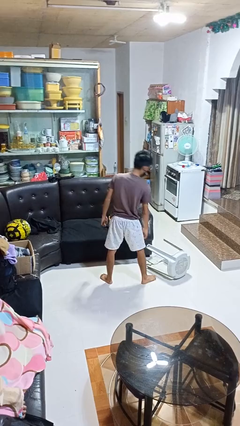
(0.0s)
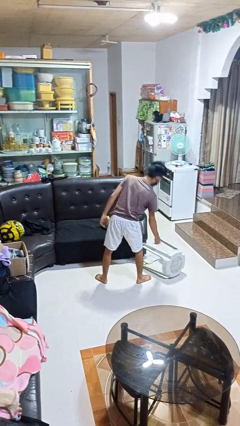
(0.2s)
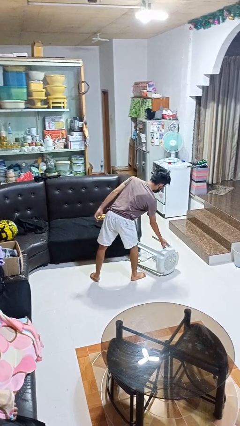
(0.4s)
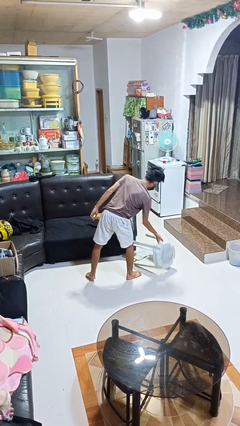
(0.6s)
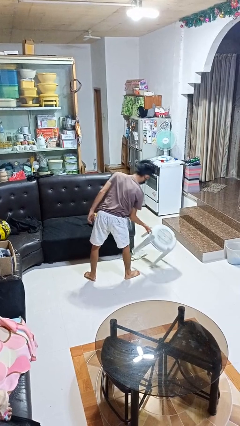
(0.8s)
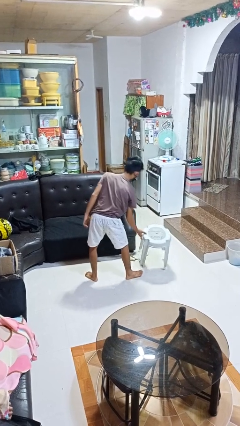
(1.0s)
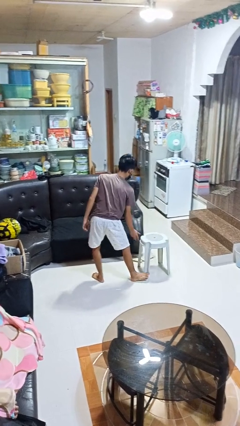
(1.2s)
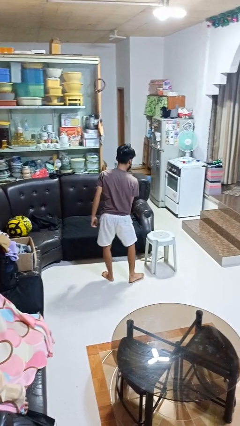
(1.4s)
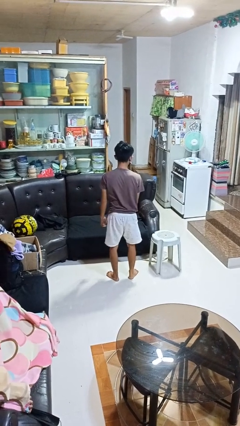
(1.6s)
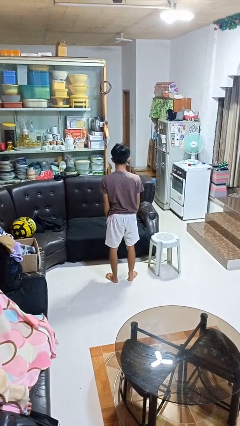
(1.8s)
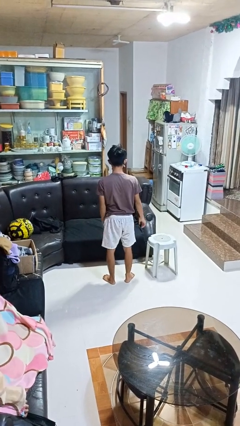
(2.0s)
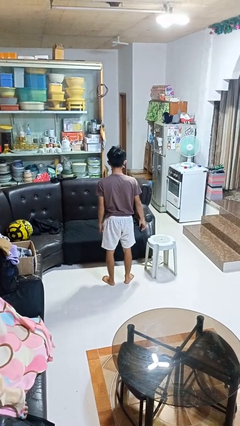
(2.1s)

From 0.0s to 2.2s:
person sets upright furniture

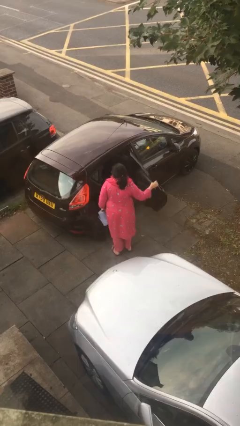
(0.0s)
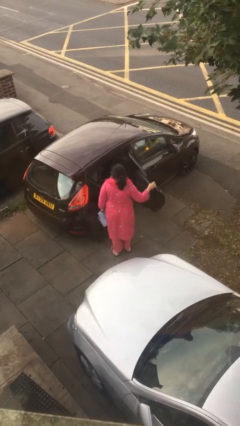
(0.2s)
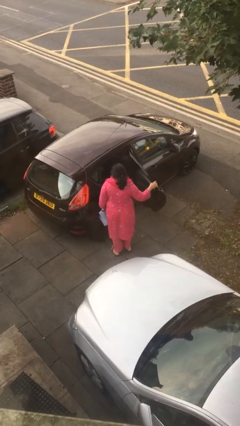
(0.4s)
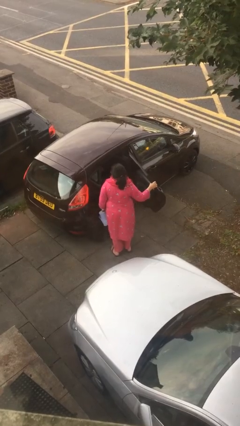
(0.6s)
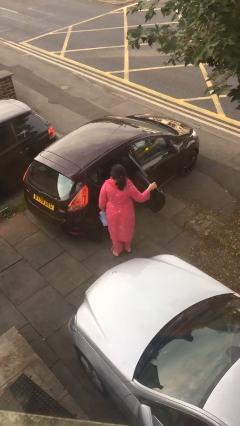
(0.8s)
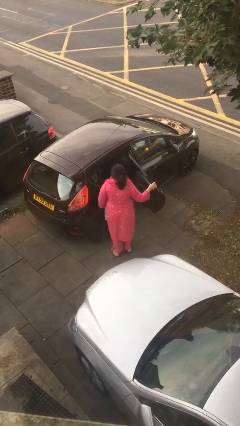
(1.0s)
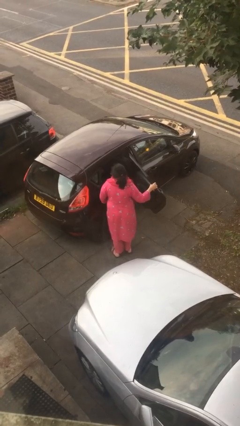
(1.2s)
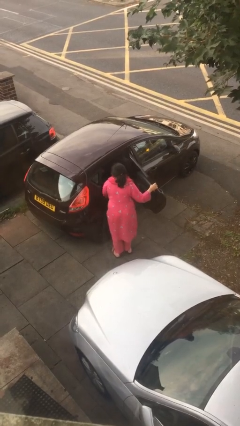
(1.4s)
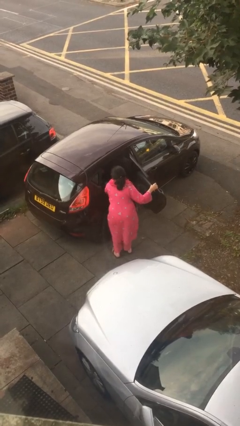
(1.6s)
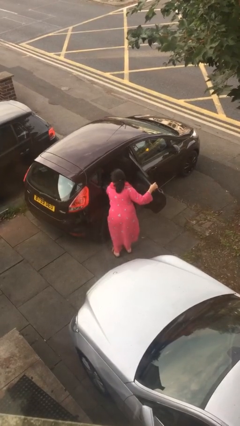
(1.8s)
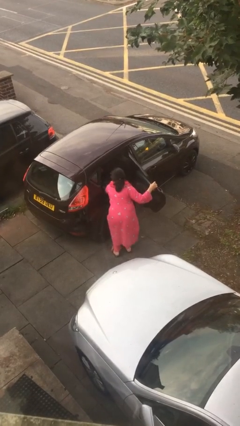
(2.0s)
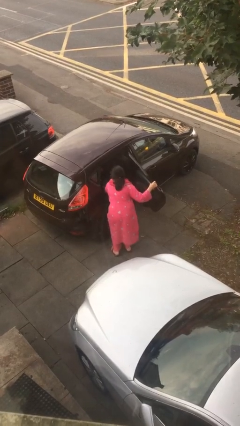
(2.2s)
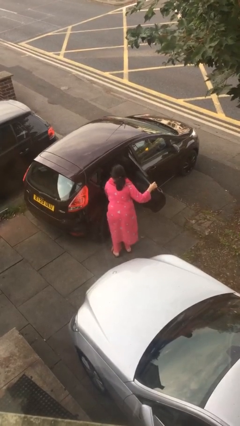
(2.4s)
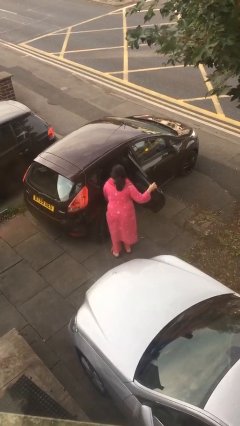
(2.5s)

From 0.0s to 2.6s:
person loads car

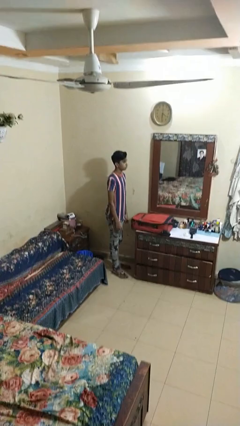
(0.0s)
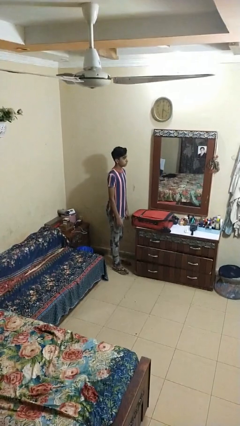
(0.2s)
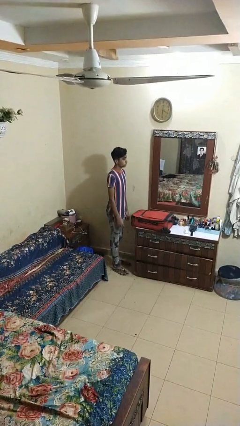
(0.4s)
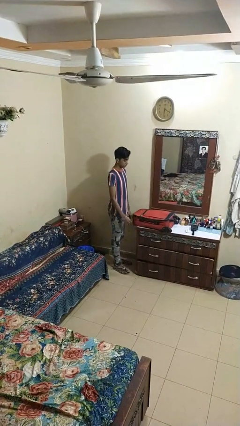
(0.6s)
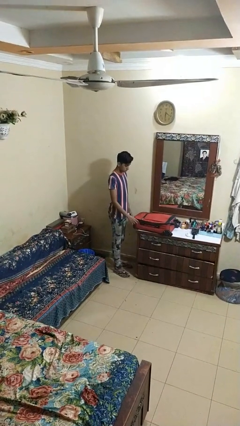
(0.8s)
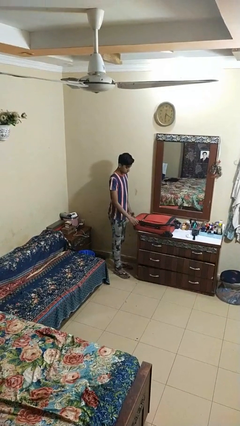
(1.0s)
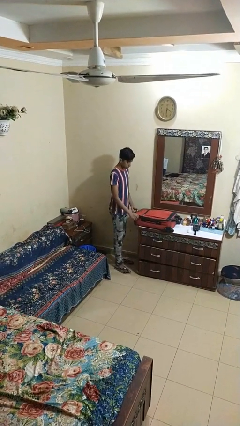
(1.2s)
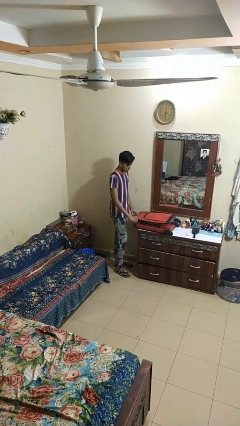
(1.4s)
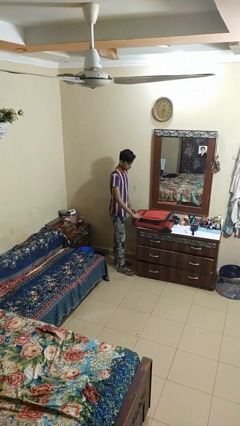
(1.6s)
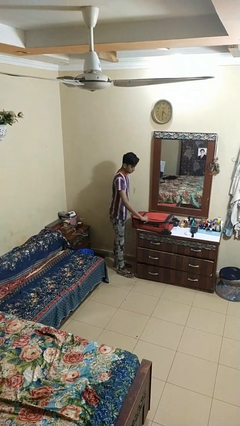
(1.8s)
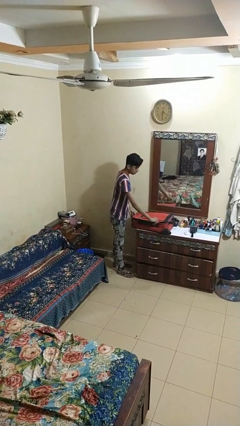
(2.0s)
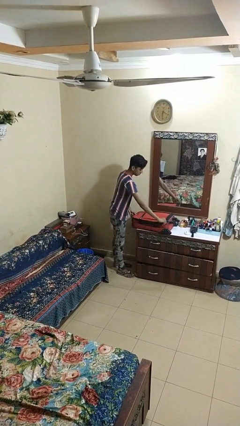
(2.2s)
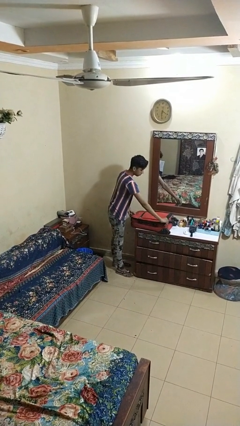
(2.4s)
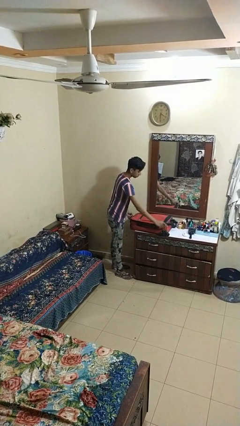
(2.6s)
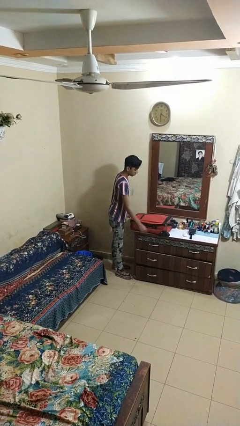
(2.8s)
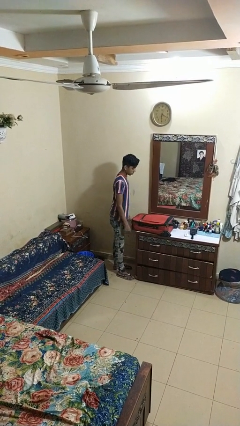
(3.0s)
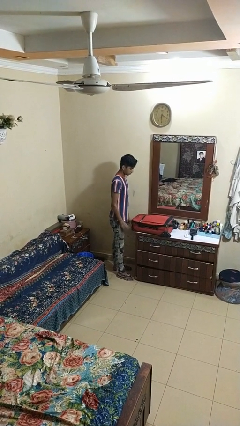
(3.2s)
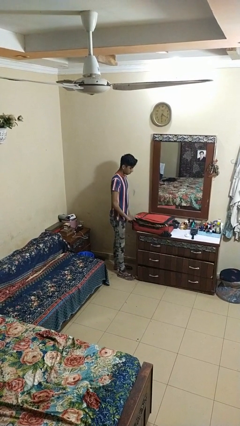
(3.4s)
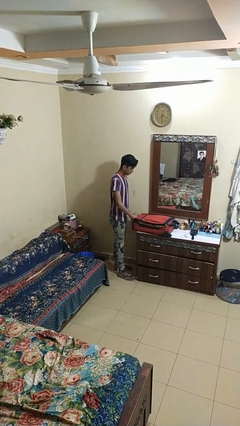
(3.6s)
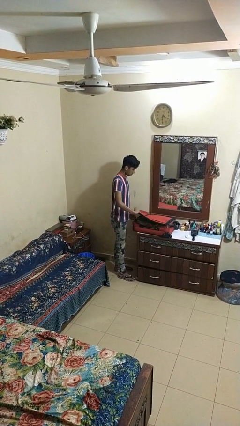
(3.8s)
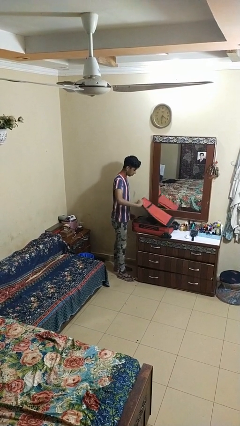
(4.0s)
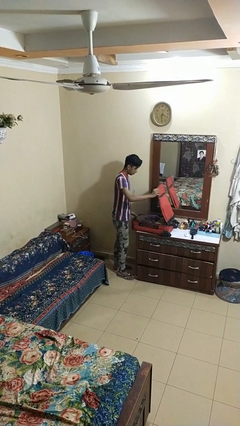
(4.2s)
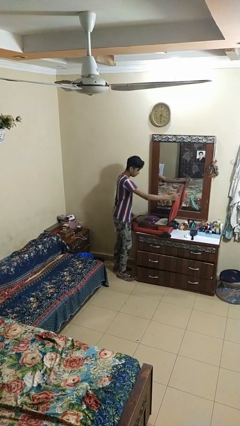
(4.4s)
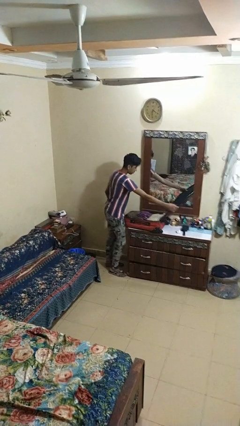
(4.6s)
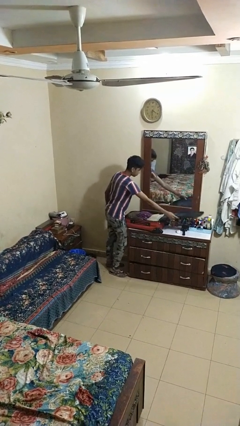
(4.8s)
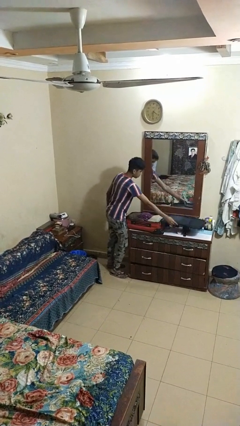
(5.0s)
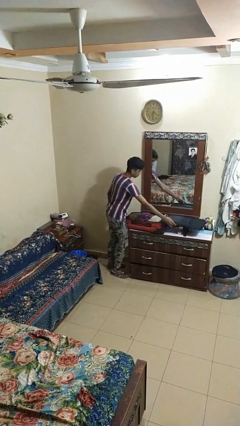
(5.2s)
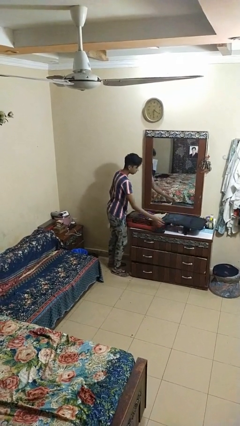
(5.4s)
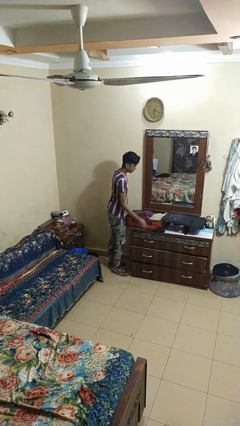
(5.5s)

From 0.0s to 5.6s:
person opens suitcase

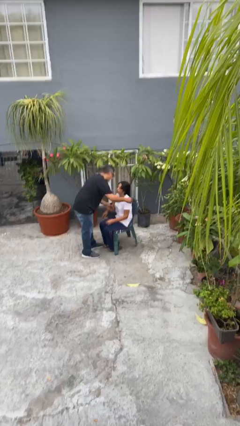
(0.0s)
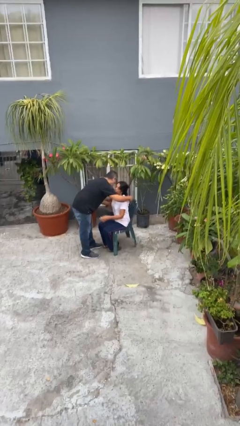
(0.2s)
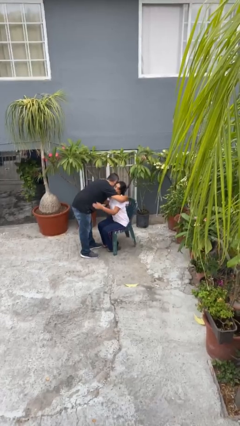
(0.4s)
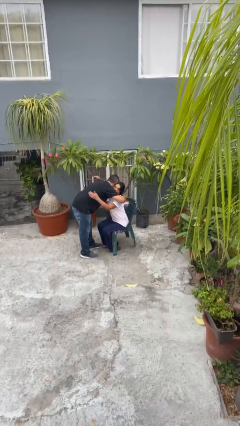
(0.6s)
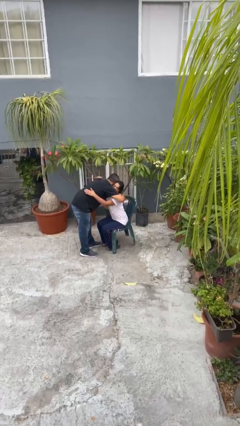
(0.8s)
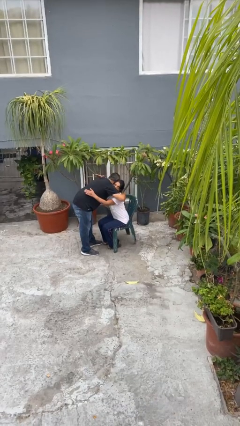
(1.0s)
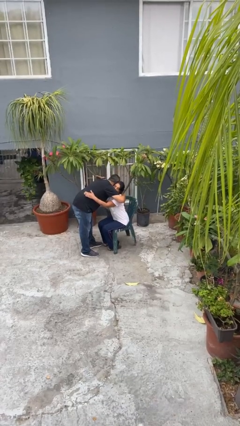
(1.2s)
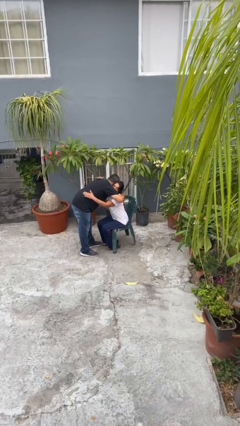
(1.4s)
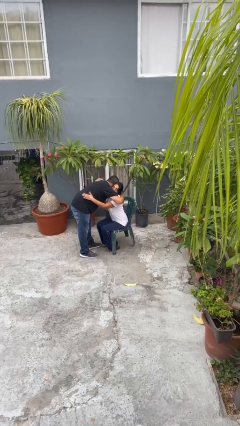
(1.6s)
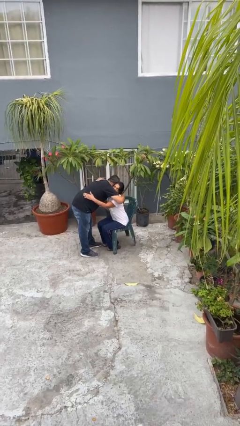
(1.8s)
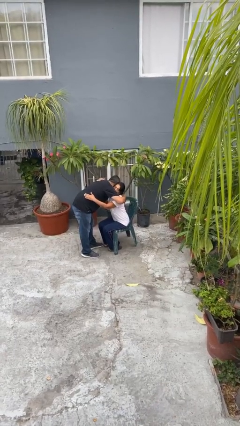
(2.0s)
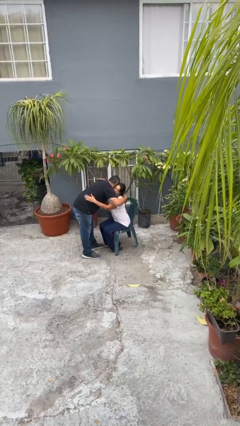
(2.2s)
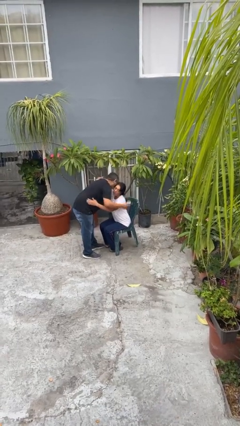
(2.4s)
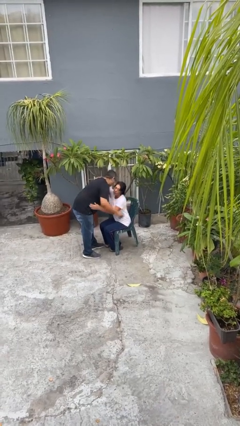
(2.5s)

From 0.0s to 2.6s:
person embraces person

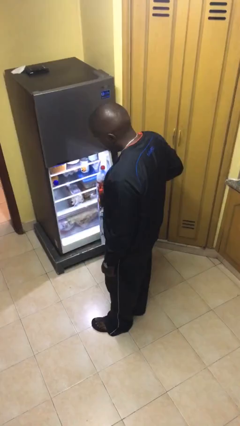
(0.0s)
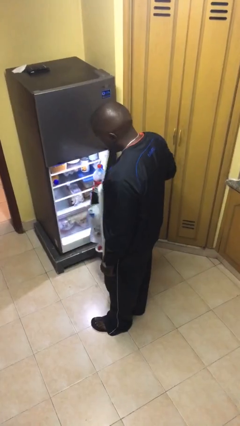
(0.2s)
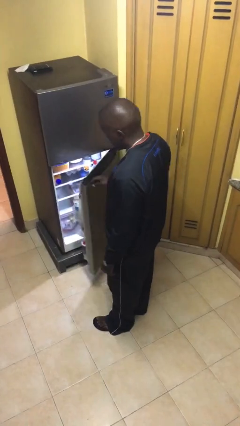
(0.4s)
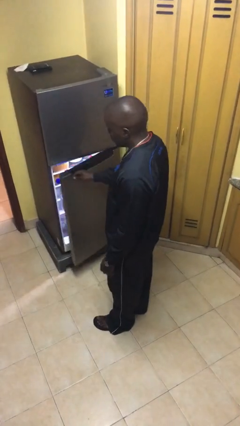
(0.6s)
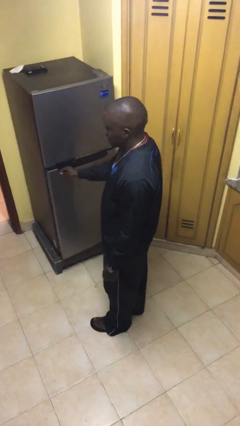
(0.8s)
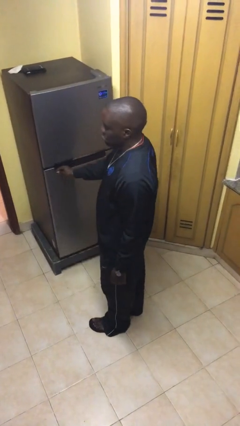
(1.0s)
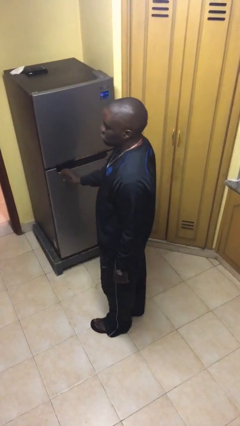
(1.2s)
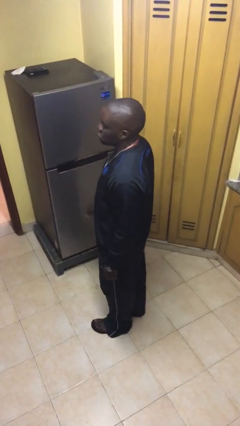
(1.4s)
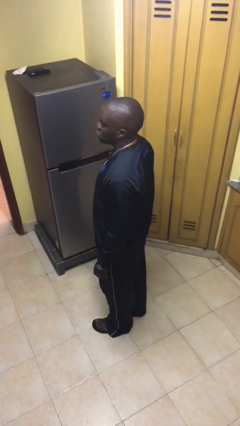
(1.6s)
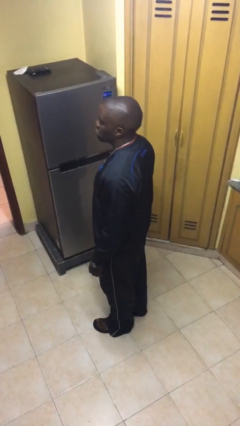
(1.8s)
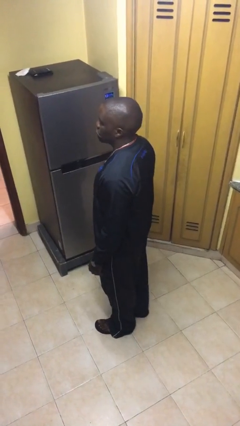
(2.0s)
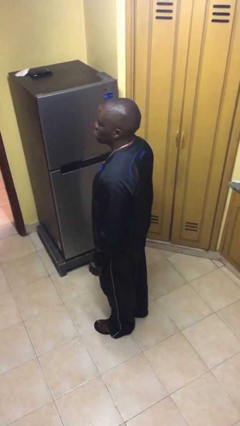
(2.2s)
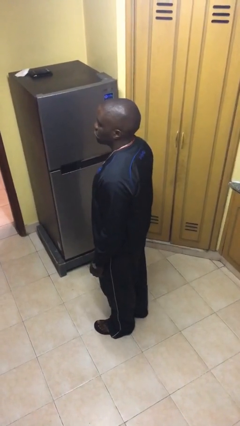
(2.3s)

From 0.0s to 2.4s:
person closes refrigerator

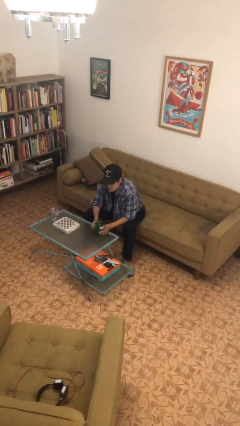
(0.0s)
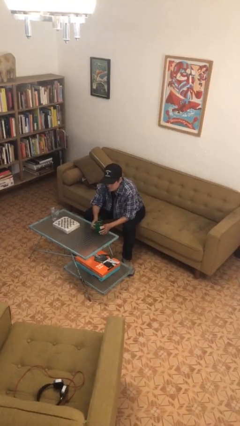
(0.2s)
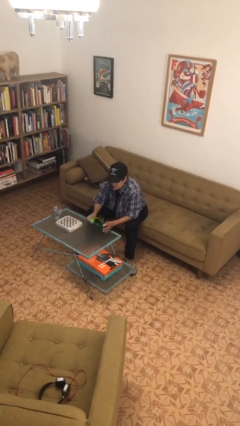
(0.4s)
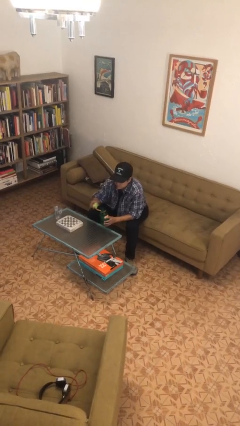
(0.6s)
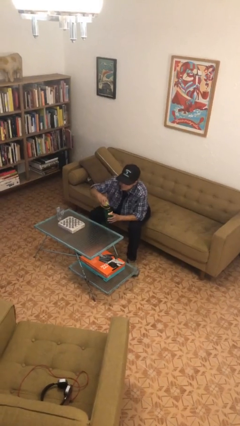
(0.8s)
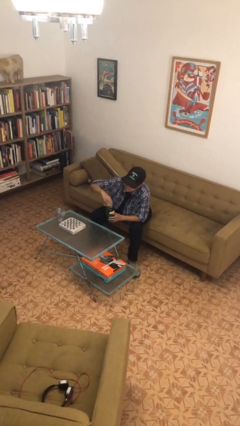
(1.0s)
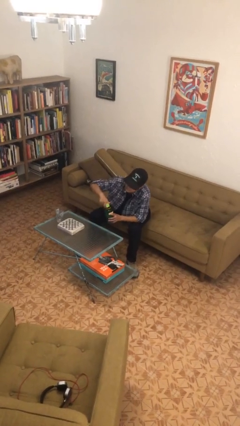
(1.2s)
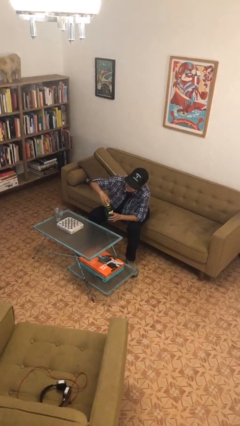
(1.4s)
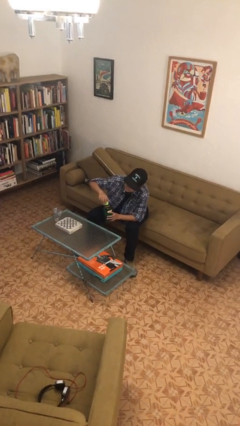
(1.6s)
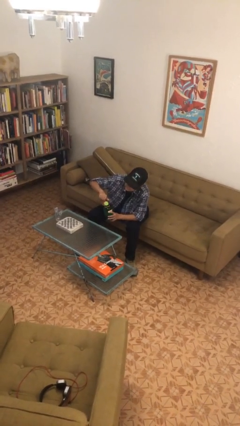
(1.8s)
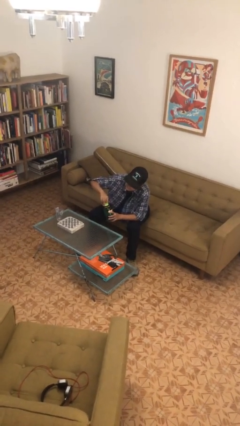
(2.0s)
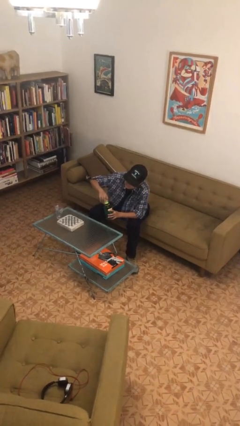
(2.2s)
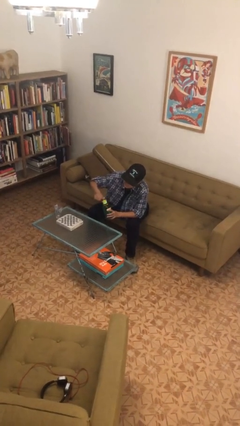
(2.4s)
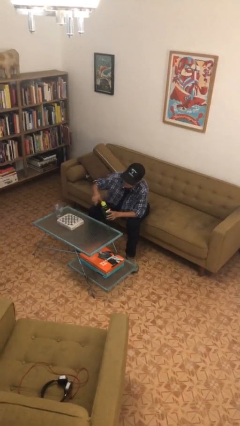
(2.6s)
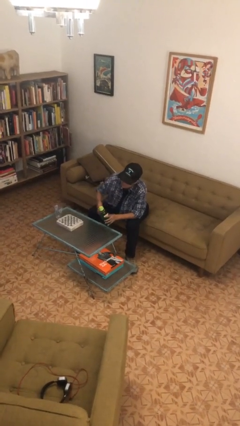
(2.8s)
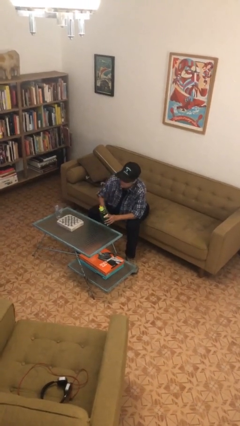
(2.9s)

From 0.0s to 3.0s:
person screws lid to bottle
